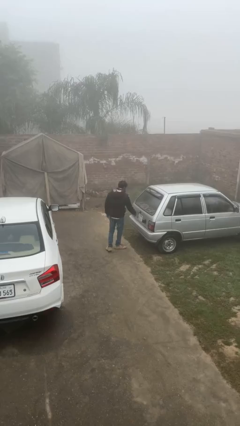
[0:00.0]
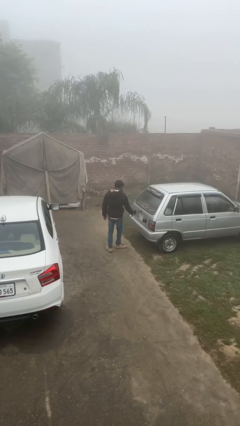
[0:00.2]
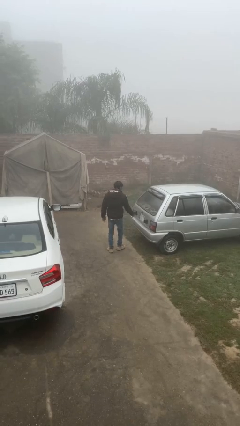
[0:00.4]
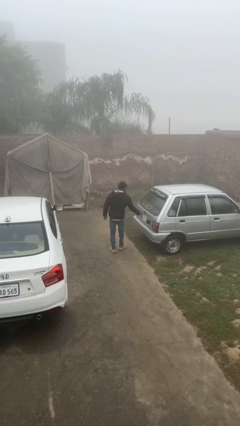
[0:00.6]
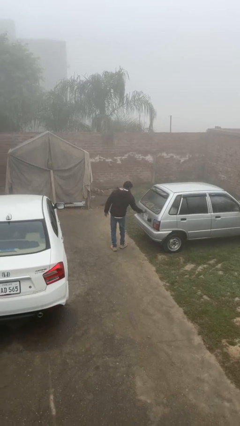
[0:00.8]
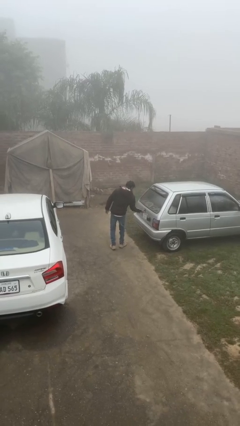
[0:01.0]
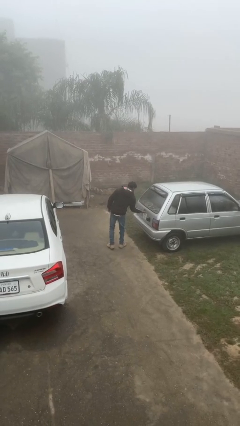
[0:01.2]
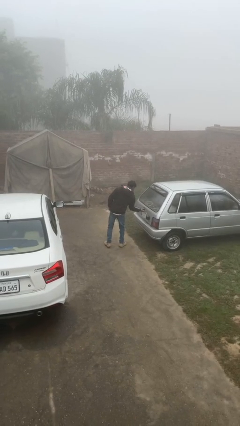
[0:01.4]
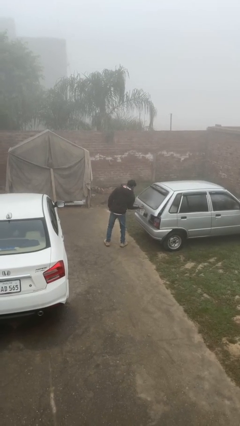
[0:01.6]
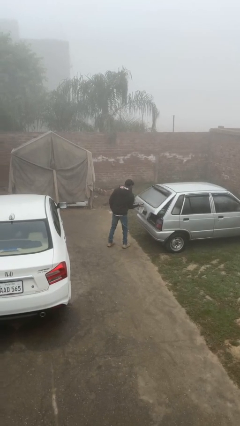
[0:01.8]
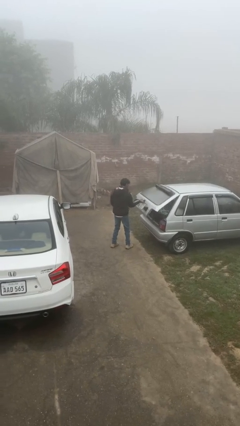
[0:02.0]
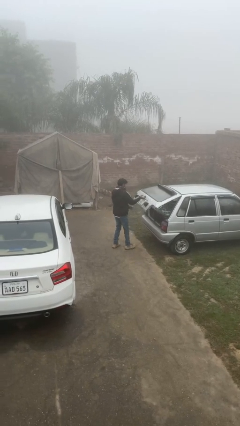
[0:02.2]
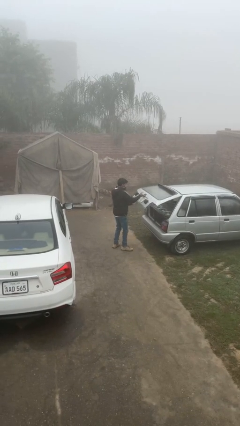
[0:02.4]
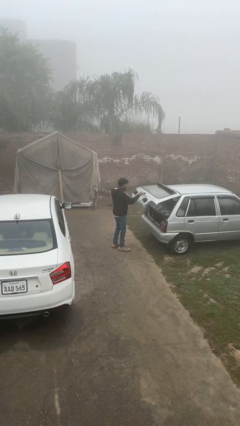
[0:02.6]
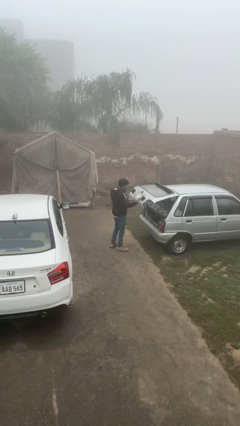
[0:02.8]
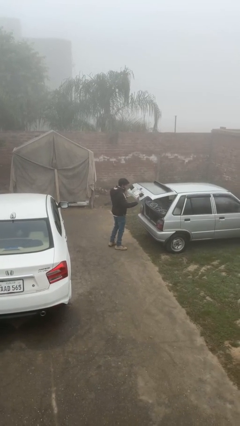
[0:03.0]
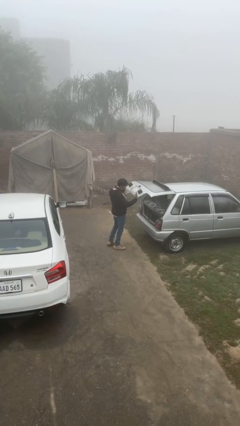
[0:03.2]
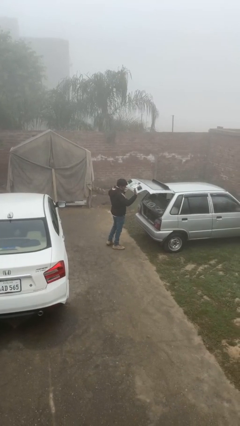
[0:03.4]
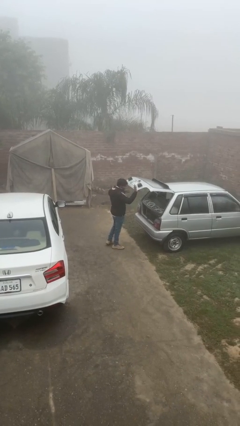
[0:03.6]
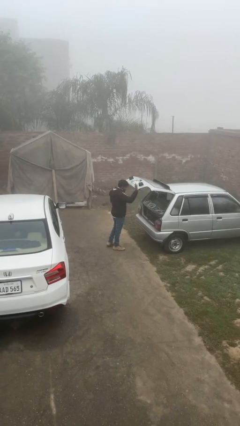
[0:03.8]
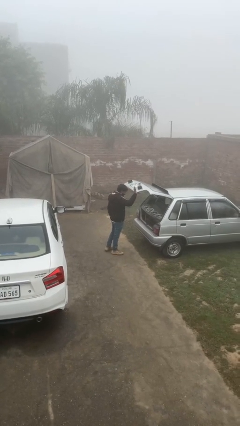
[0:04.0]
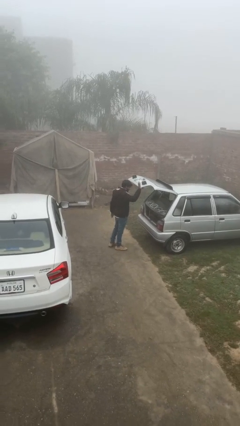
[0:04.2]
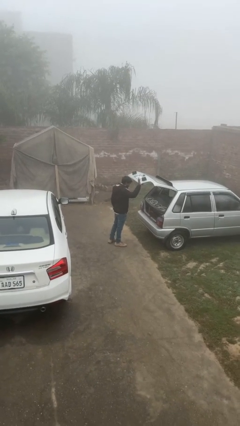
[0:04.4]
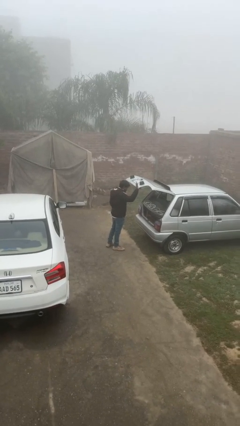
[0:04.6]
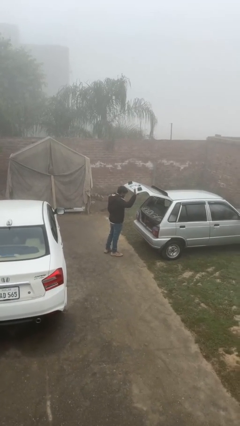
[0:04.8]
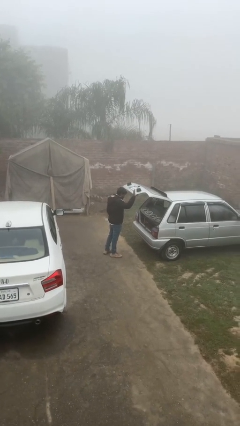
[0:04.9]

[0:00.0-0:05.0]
person opens car trunk

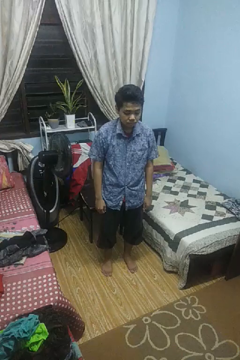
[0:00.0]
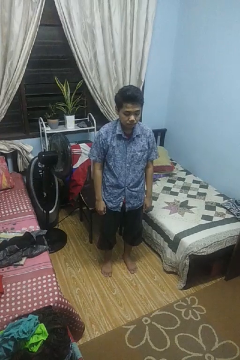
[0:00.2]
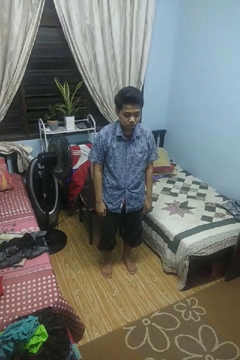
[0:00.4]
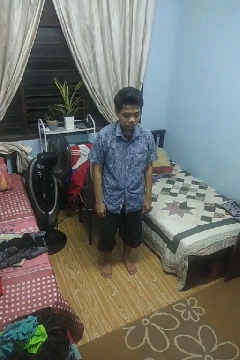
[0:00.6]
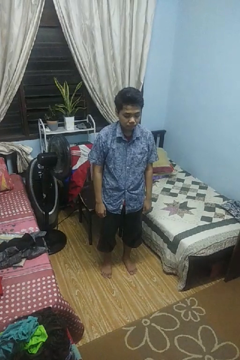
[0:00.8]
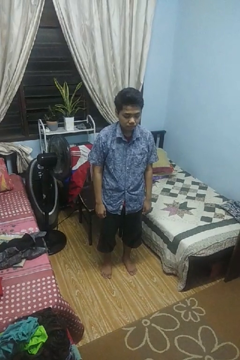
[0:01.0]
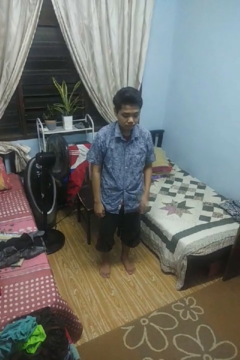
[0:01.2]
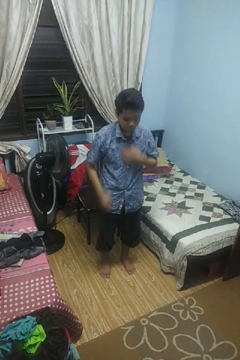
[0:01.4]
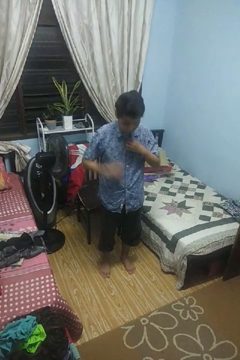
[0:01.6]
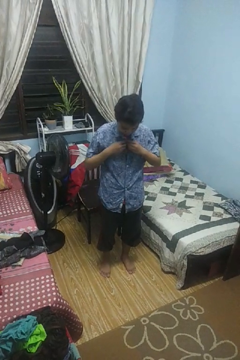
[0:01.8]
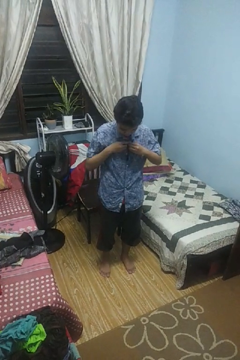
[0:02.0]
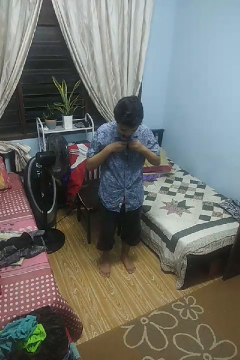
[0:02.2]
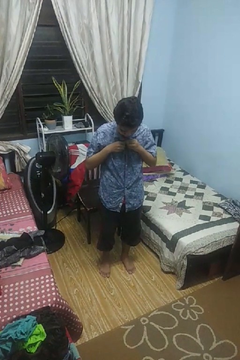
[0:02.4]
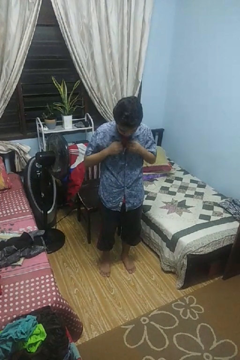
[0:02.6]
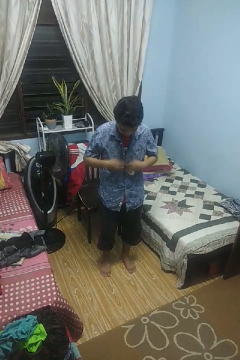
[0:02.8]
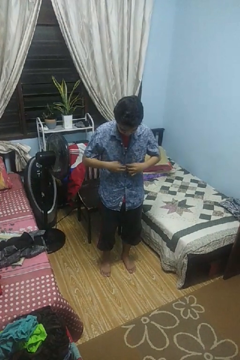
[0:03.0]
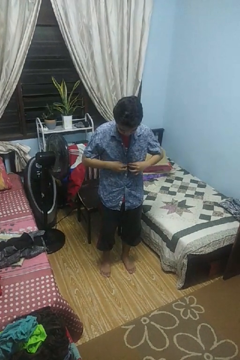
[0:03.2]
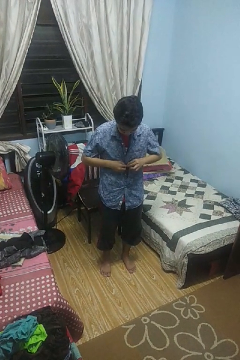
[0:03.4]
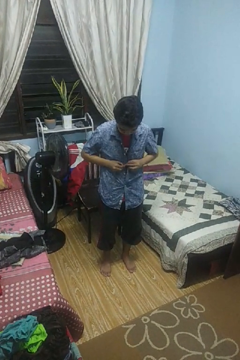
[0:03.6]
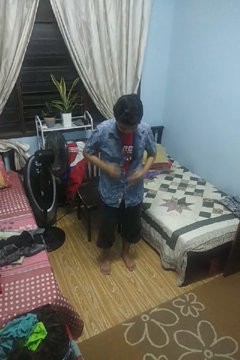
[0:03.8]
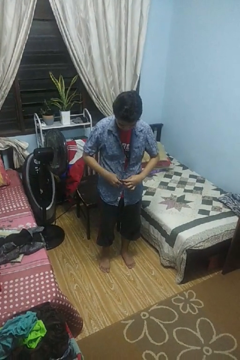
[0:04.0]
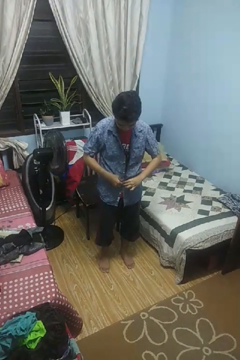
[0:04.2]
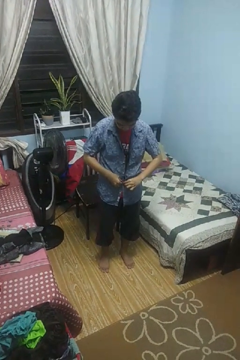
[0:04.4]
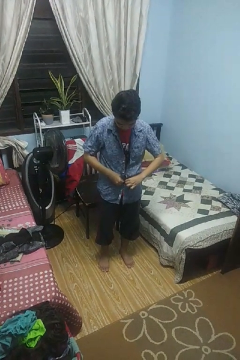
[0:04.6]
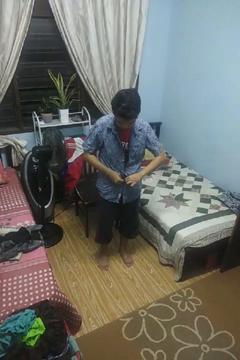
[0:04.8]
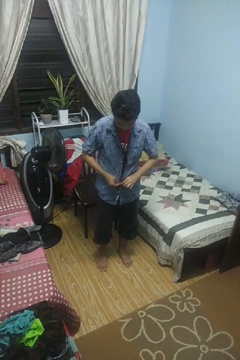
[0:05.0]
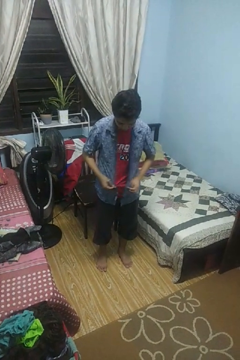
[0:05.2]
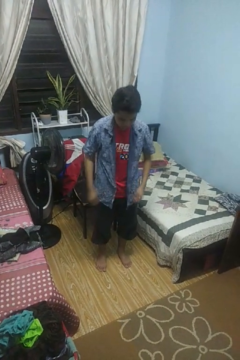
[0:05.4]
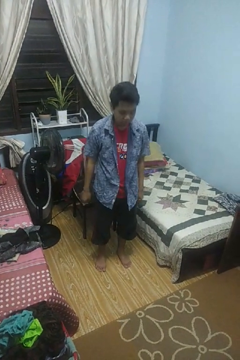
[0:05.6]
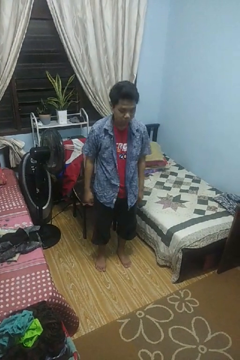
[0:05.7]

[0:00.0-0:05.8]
person unbuttons shirt

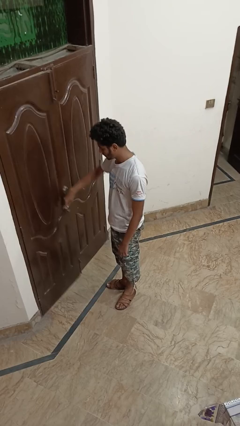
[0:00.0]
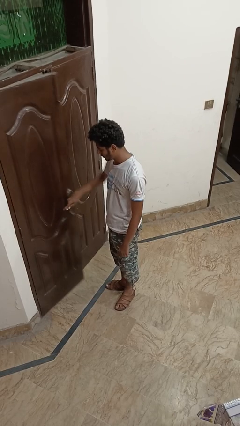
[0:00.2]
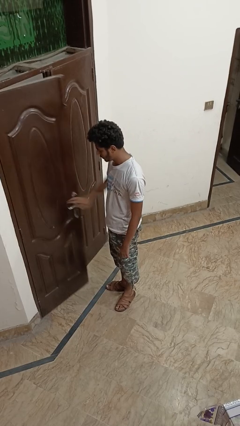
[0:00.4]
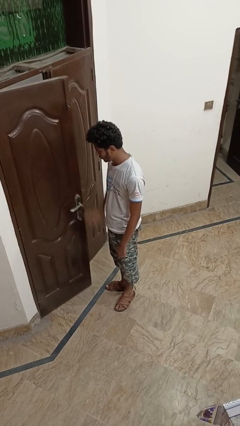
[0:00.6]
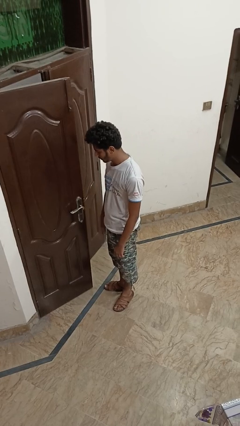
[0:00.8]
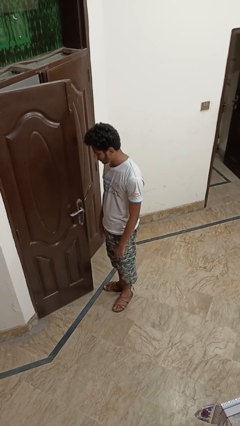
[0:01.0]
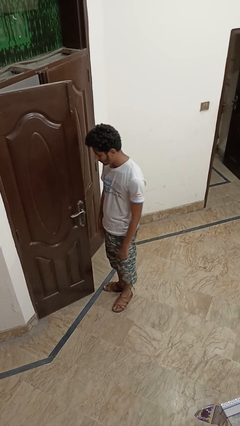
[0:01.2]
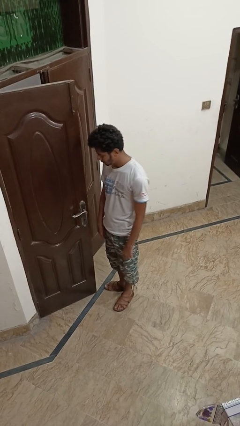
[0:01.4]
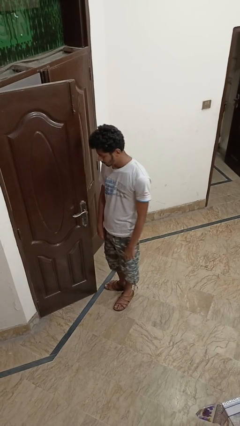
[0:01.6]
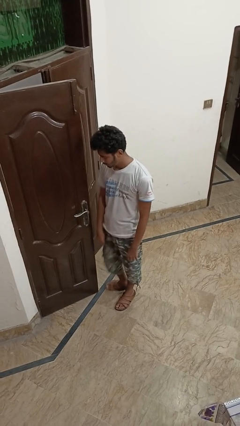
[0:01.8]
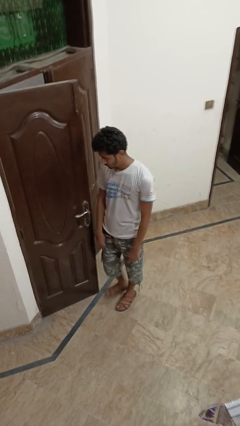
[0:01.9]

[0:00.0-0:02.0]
person opens facility door

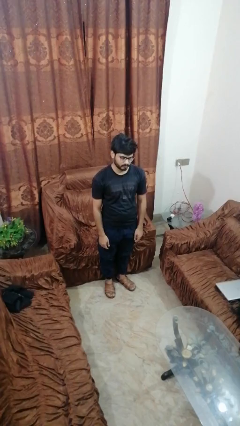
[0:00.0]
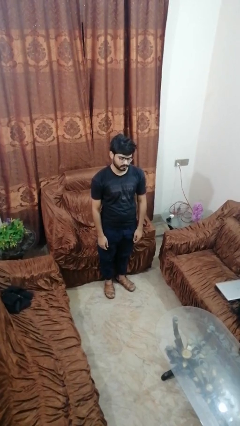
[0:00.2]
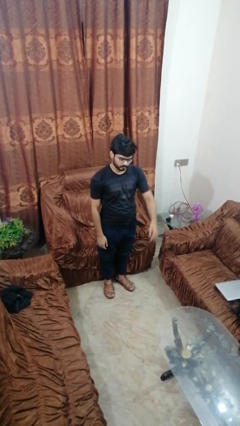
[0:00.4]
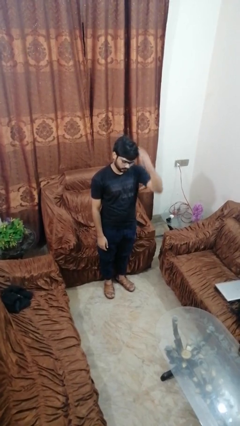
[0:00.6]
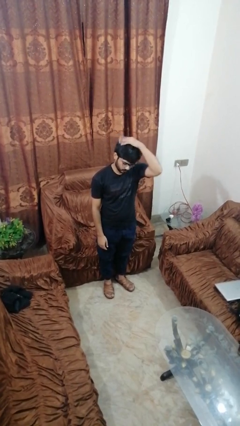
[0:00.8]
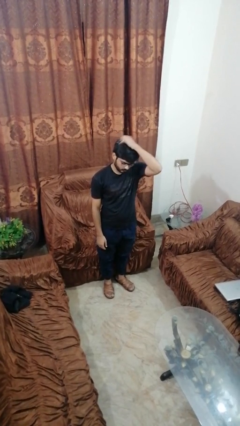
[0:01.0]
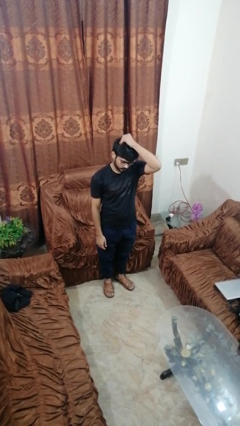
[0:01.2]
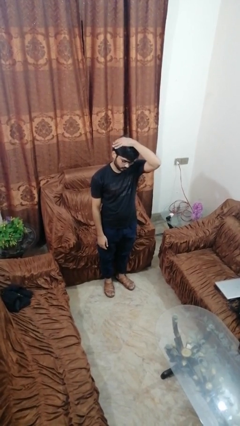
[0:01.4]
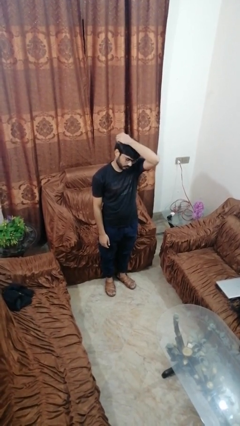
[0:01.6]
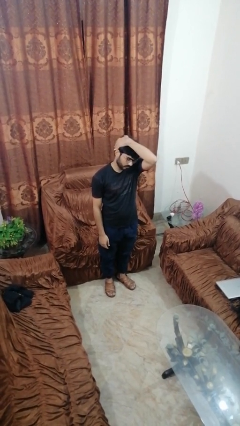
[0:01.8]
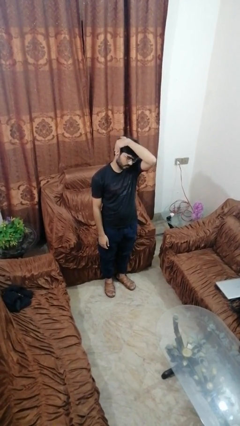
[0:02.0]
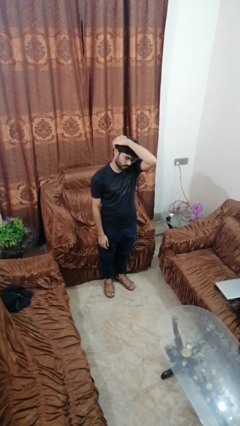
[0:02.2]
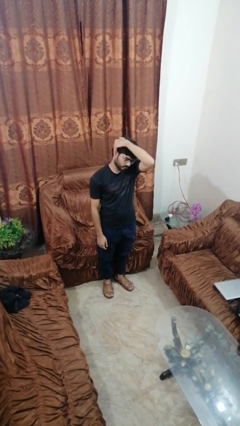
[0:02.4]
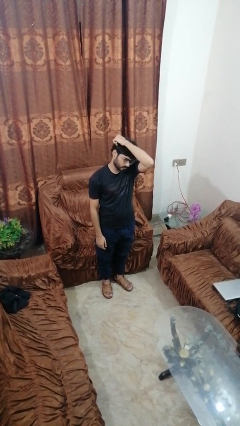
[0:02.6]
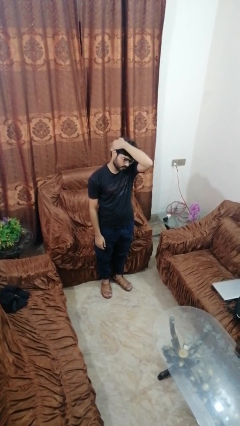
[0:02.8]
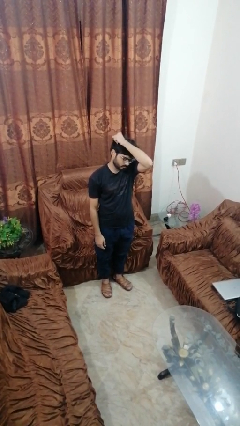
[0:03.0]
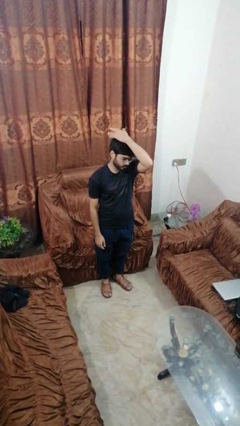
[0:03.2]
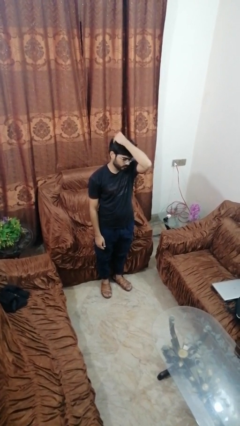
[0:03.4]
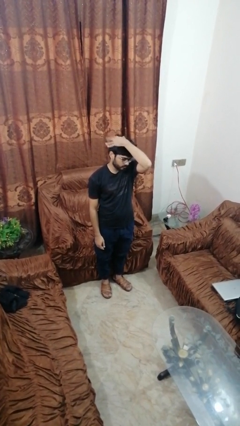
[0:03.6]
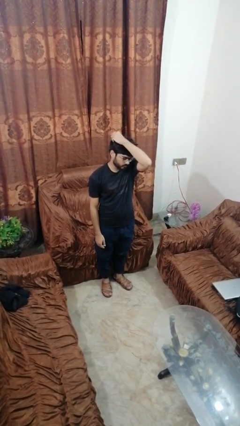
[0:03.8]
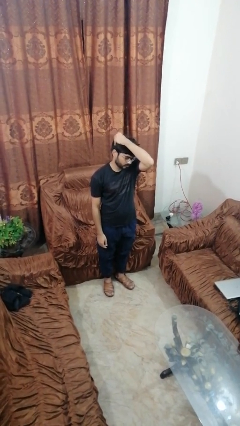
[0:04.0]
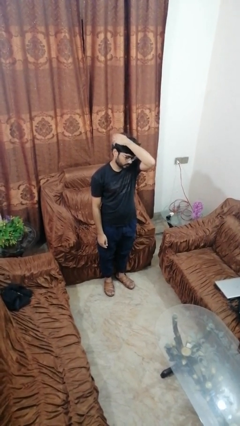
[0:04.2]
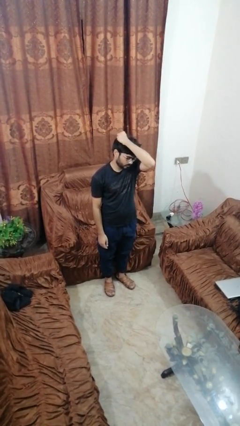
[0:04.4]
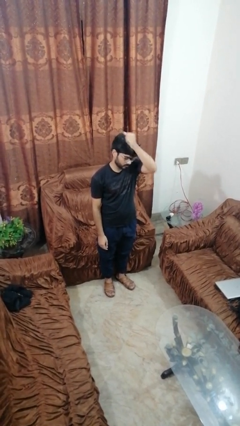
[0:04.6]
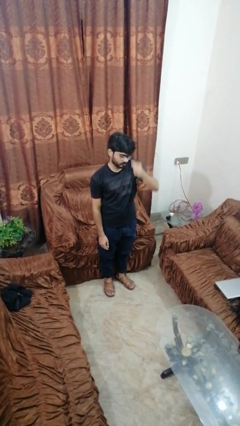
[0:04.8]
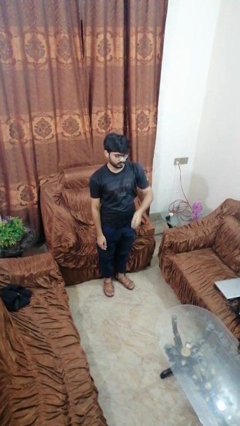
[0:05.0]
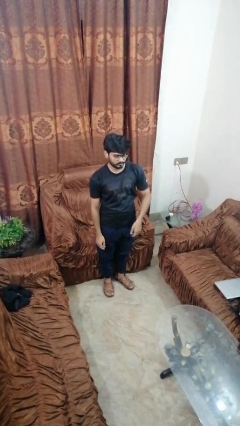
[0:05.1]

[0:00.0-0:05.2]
person scratches face

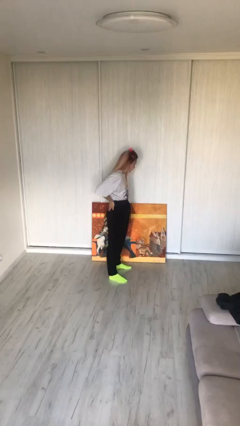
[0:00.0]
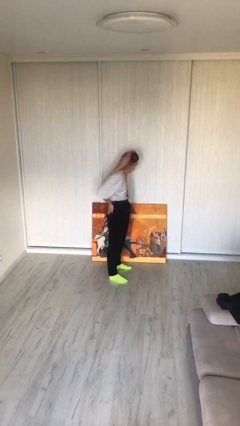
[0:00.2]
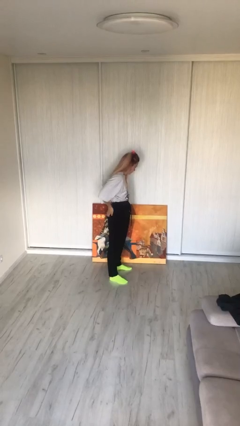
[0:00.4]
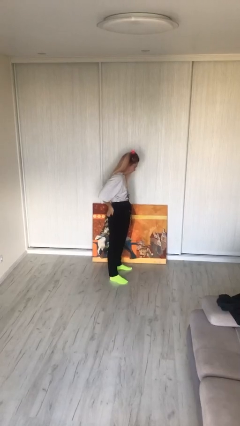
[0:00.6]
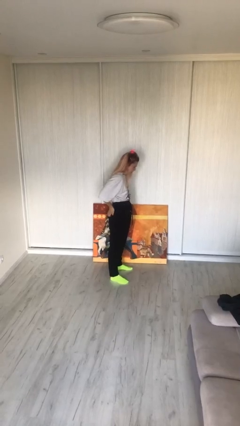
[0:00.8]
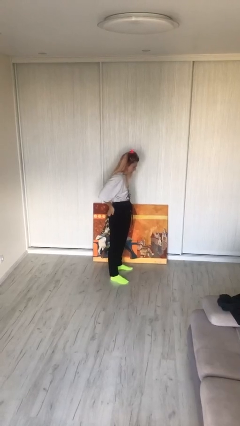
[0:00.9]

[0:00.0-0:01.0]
person puts hands in back pockets
